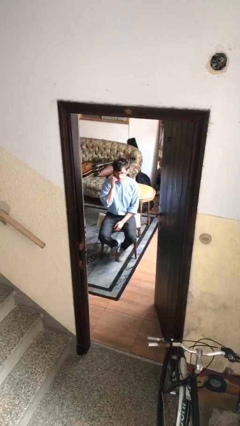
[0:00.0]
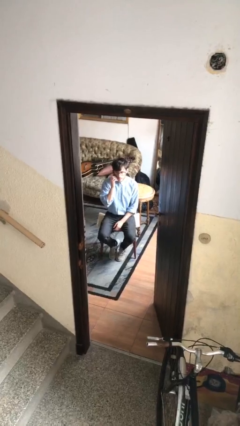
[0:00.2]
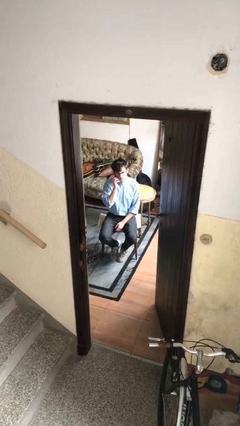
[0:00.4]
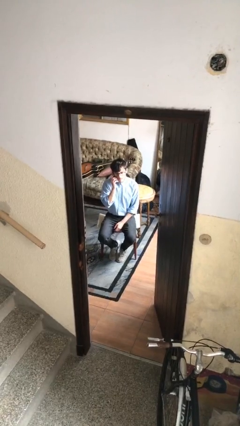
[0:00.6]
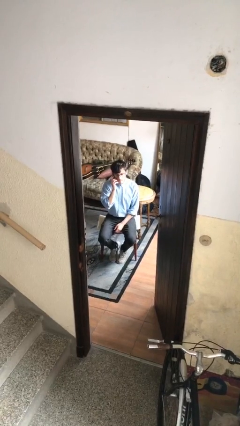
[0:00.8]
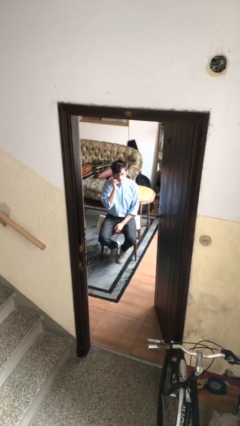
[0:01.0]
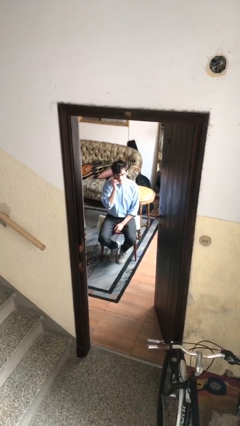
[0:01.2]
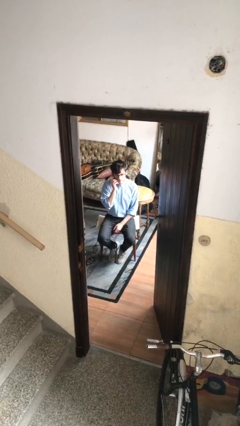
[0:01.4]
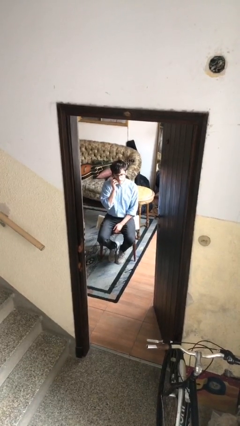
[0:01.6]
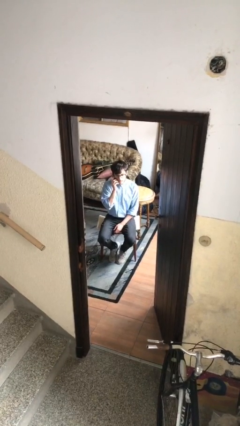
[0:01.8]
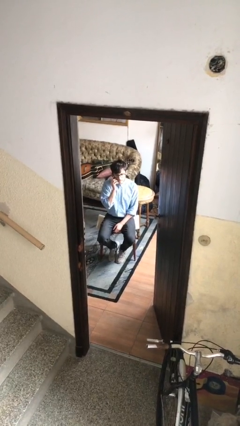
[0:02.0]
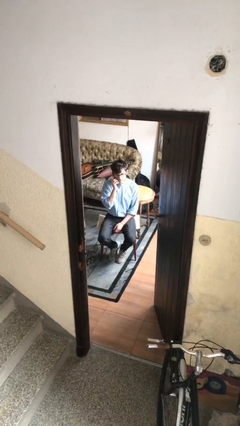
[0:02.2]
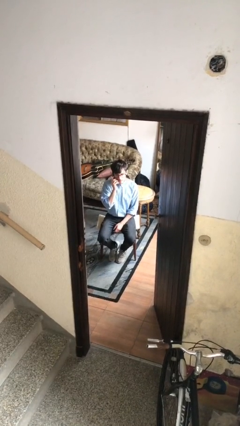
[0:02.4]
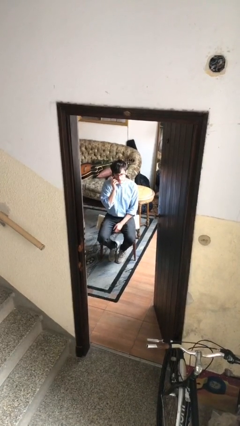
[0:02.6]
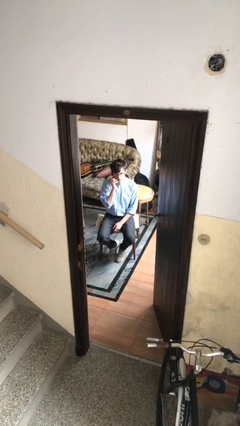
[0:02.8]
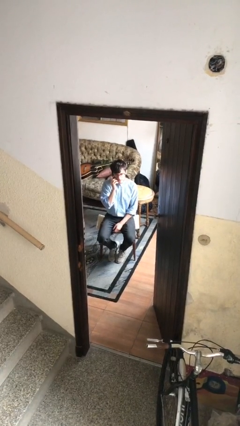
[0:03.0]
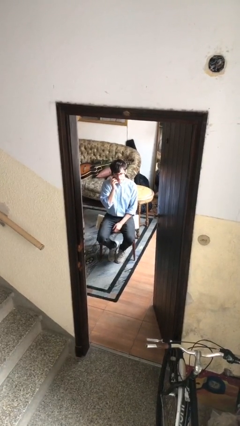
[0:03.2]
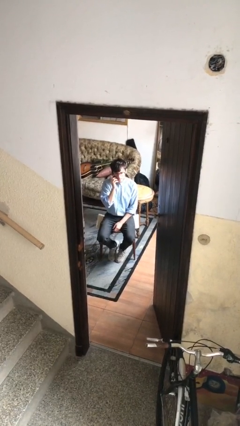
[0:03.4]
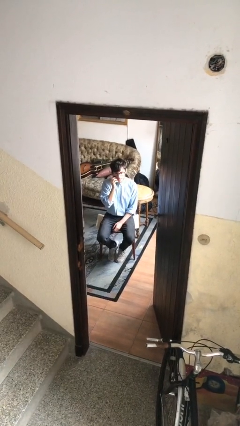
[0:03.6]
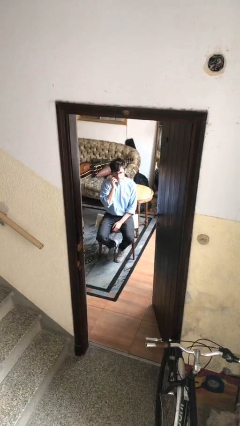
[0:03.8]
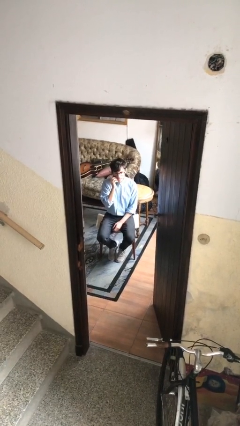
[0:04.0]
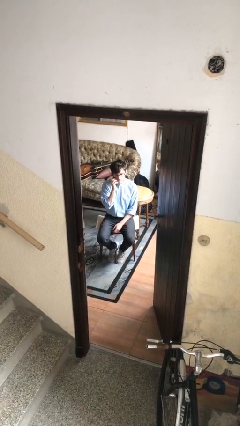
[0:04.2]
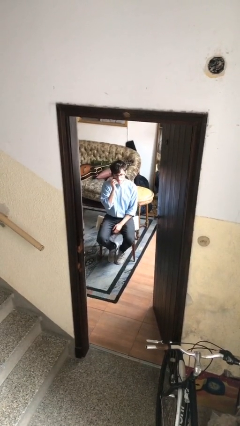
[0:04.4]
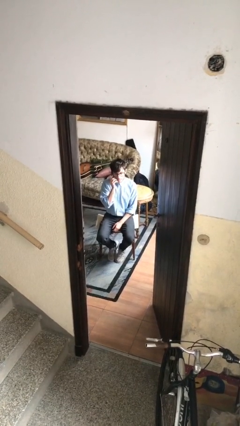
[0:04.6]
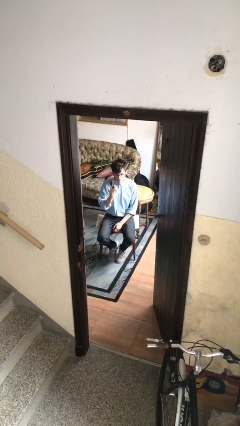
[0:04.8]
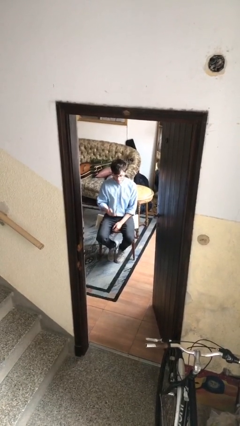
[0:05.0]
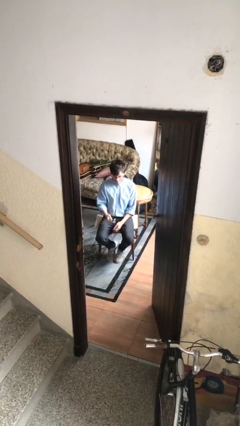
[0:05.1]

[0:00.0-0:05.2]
person talks on phone

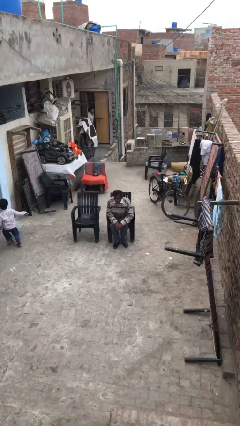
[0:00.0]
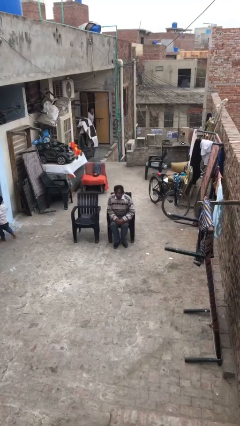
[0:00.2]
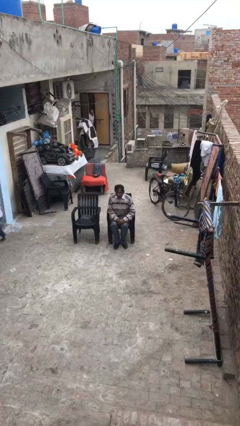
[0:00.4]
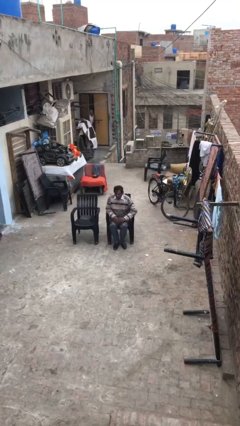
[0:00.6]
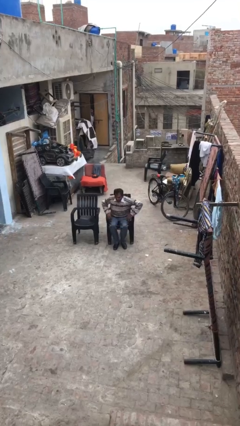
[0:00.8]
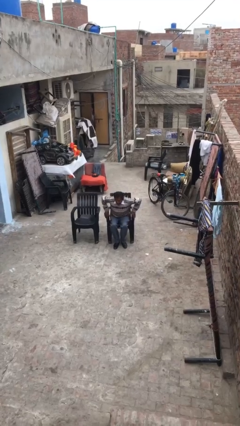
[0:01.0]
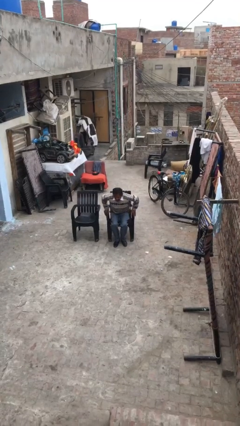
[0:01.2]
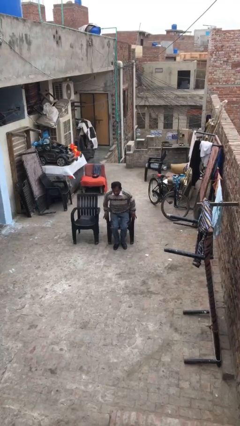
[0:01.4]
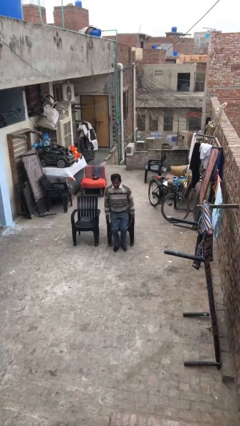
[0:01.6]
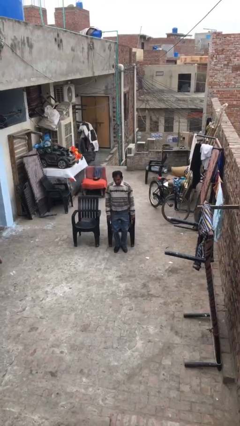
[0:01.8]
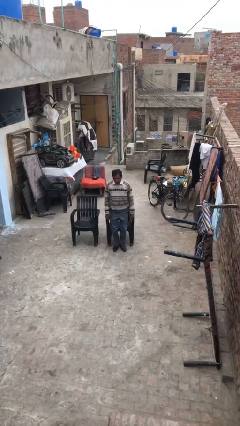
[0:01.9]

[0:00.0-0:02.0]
person stands up

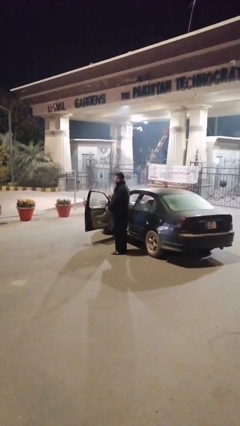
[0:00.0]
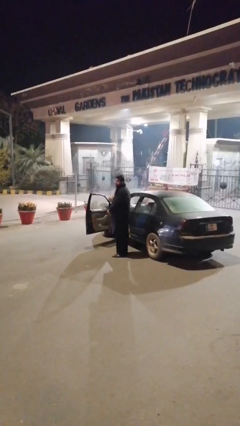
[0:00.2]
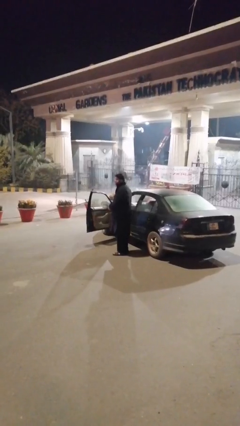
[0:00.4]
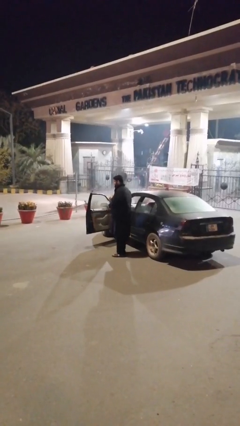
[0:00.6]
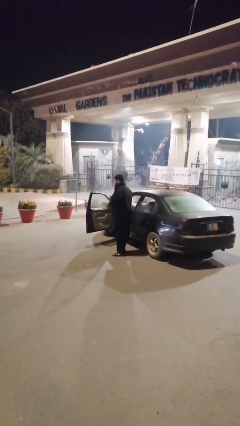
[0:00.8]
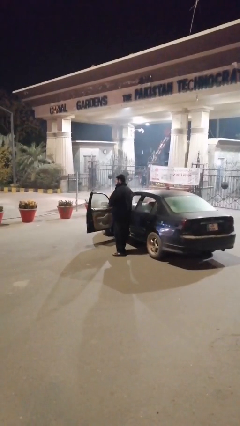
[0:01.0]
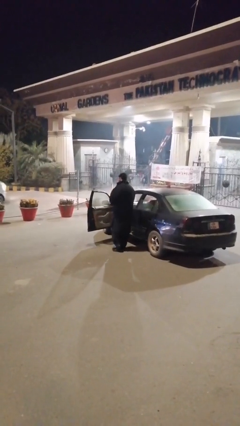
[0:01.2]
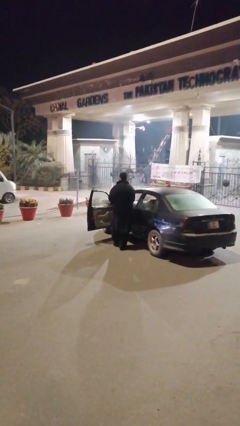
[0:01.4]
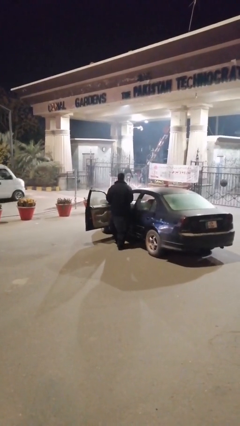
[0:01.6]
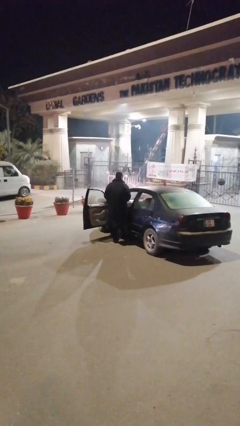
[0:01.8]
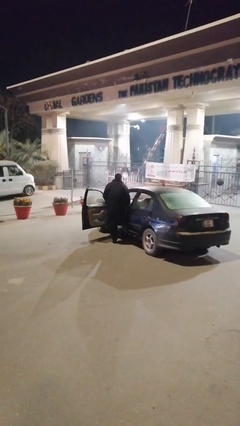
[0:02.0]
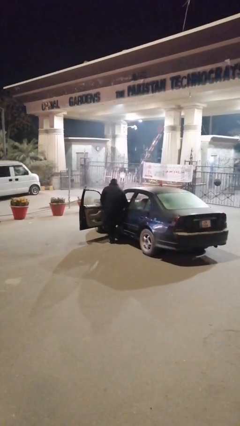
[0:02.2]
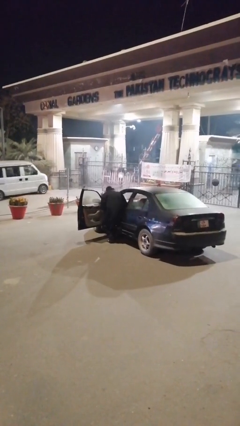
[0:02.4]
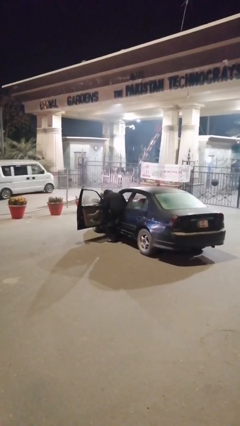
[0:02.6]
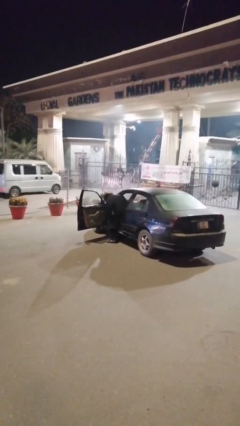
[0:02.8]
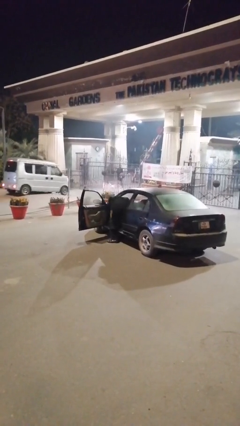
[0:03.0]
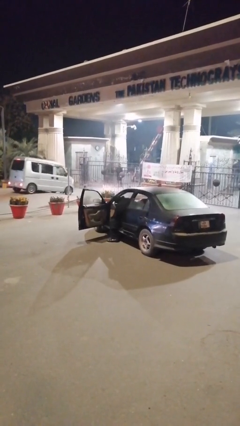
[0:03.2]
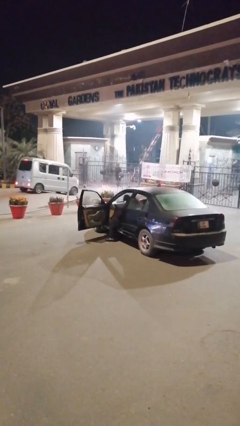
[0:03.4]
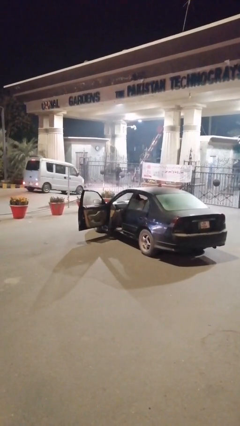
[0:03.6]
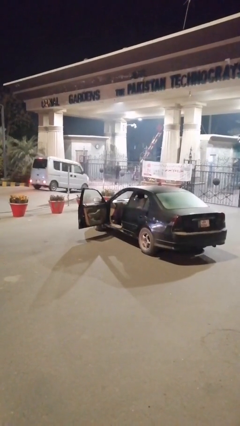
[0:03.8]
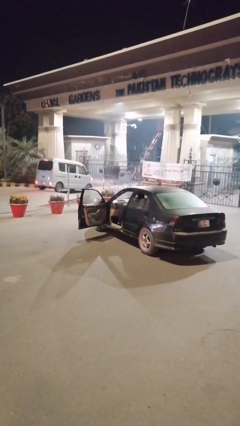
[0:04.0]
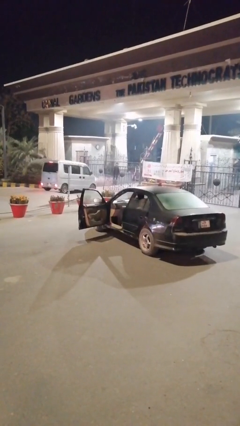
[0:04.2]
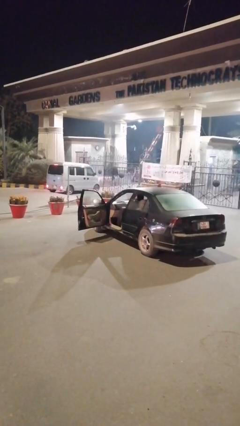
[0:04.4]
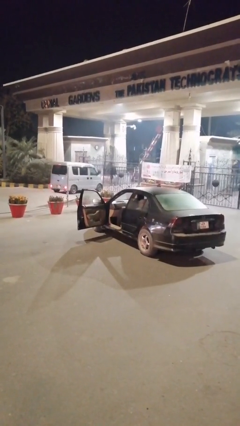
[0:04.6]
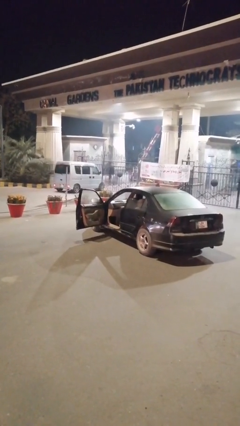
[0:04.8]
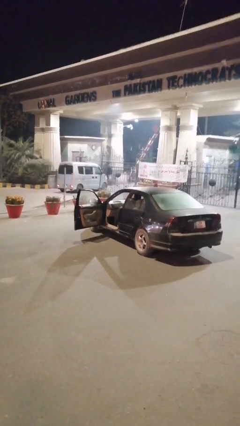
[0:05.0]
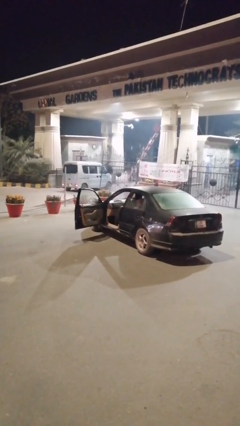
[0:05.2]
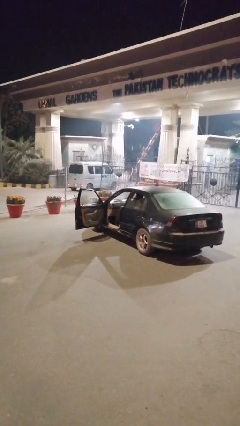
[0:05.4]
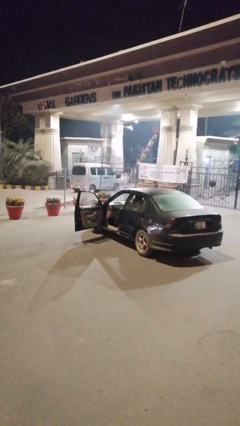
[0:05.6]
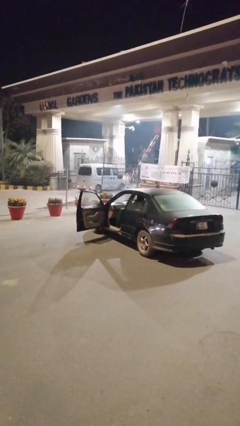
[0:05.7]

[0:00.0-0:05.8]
person enters car

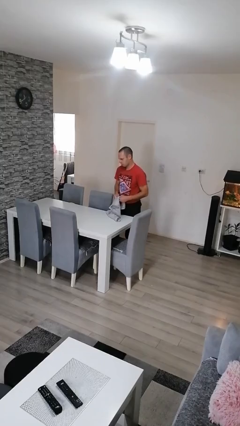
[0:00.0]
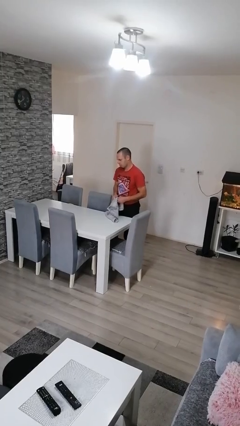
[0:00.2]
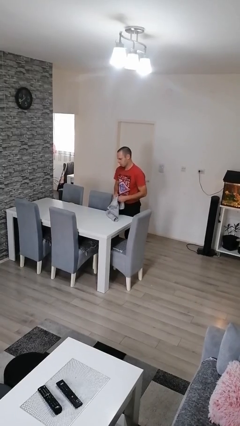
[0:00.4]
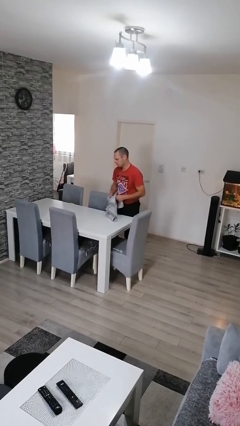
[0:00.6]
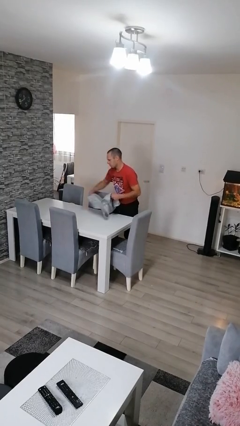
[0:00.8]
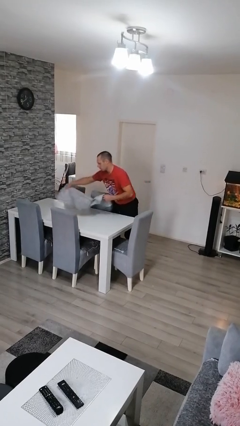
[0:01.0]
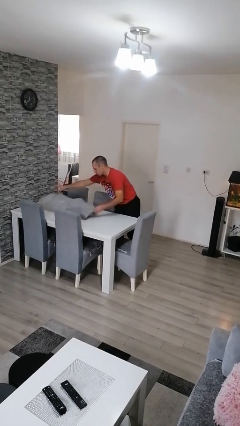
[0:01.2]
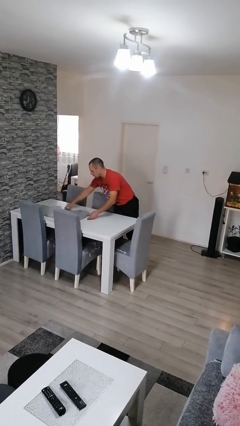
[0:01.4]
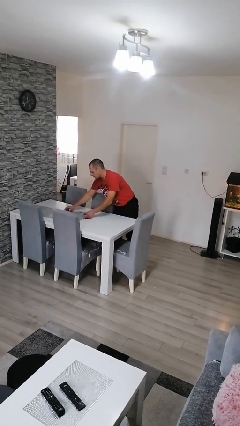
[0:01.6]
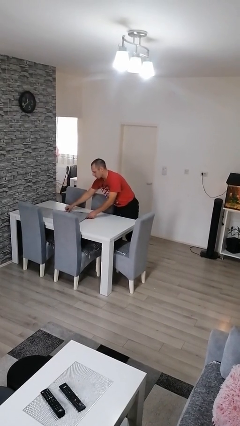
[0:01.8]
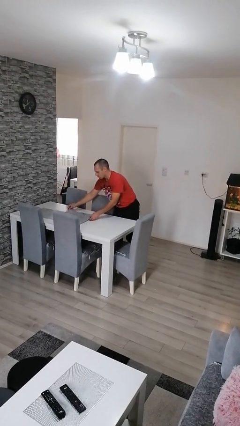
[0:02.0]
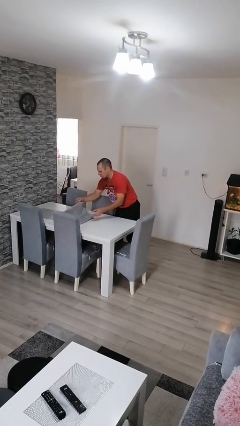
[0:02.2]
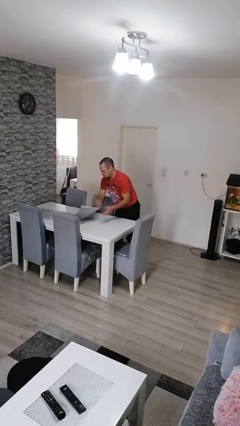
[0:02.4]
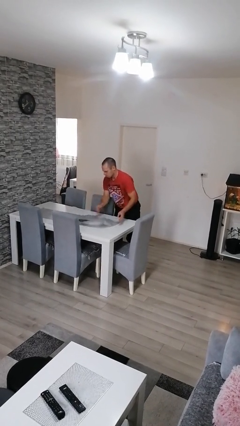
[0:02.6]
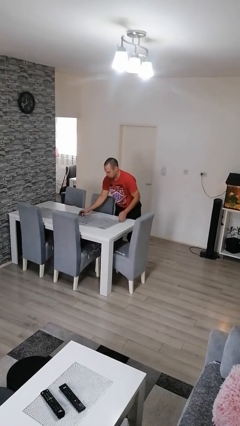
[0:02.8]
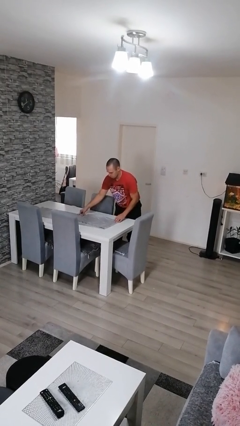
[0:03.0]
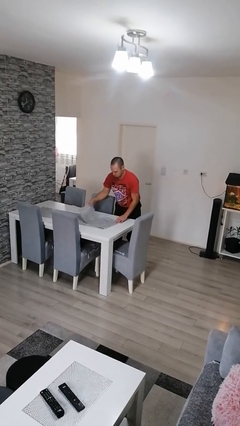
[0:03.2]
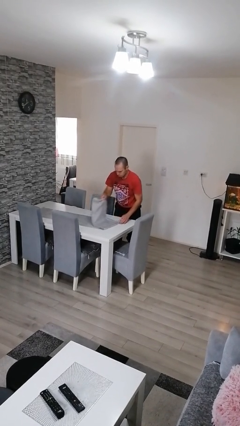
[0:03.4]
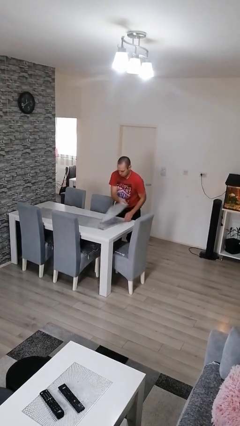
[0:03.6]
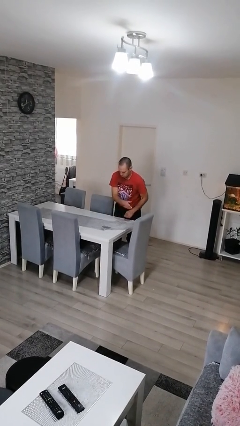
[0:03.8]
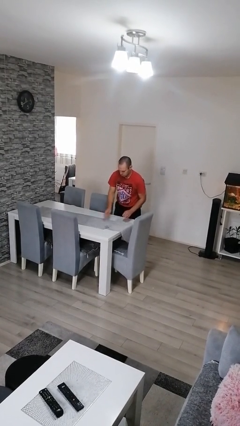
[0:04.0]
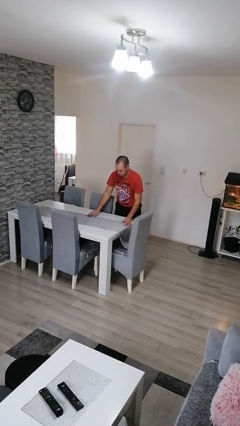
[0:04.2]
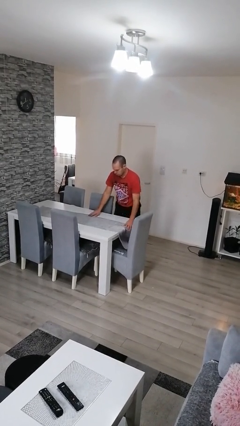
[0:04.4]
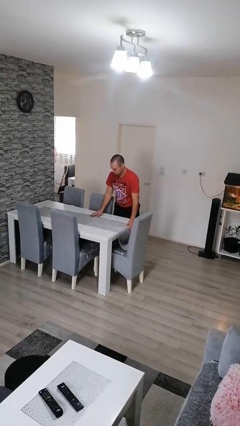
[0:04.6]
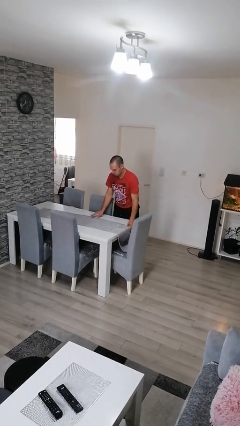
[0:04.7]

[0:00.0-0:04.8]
person spreads tablecloth
